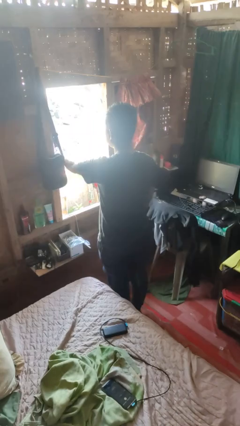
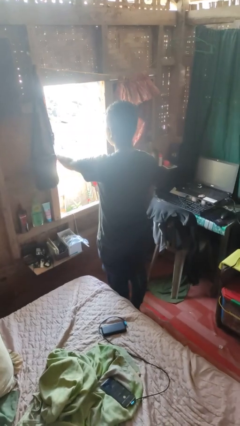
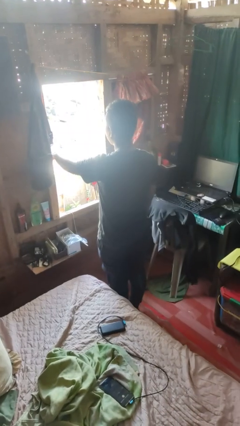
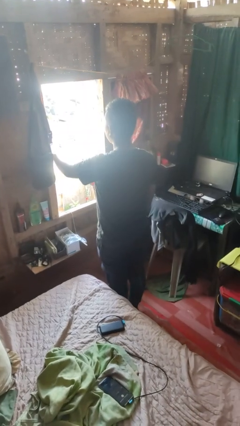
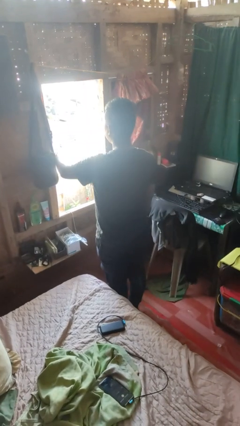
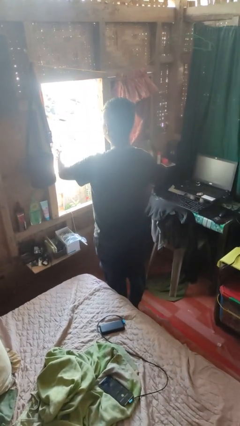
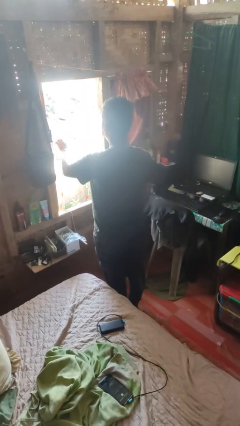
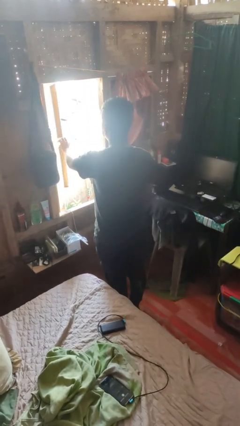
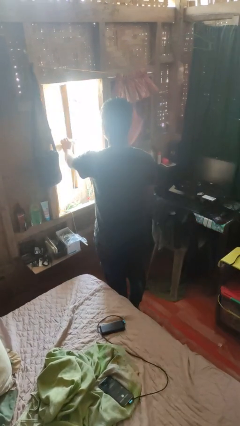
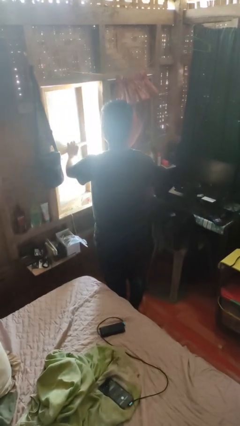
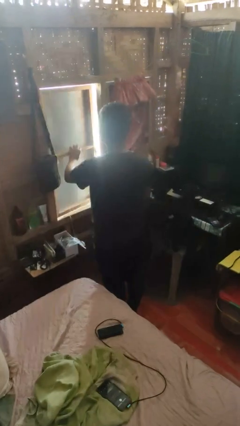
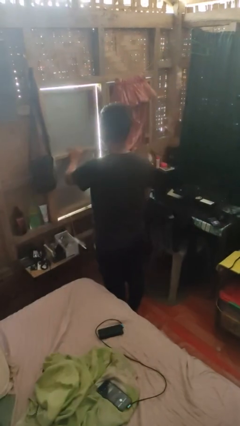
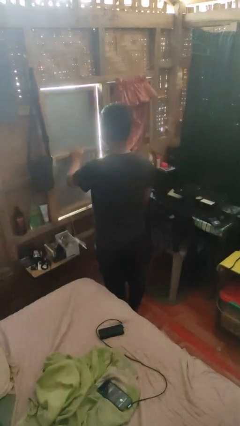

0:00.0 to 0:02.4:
person closes home window

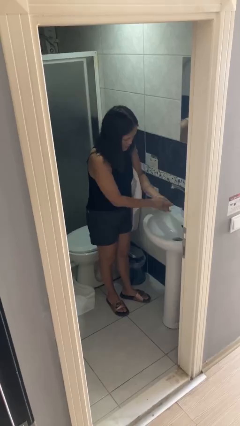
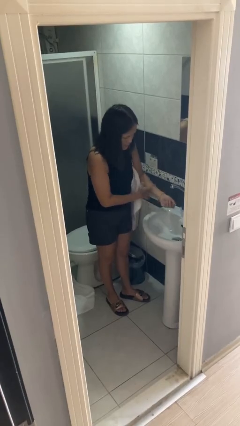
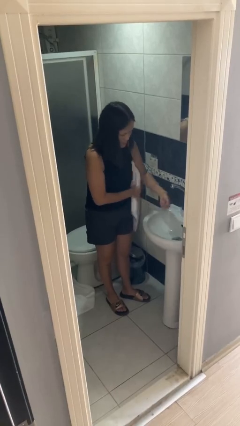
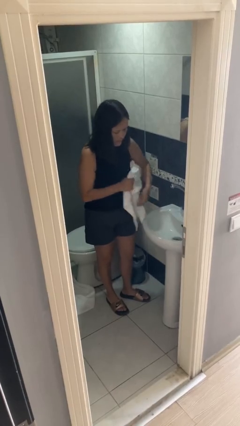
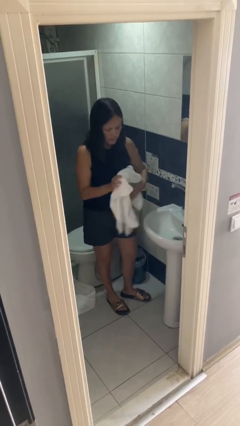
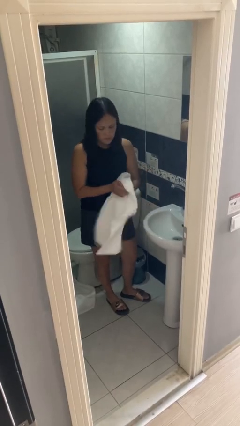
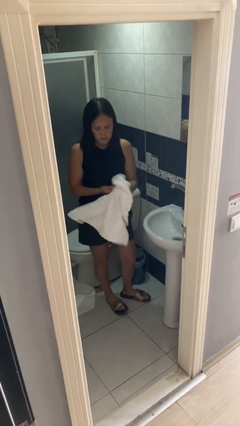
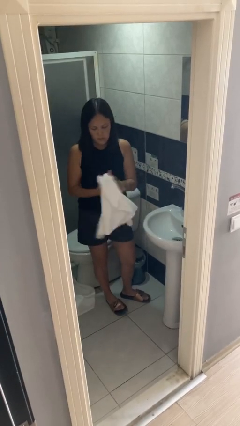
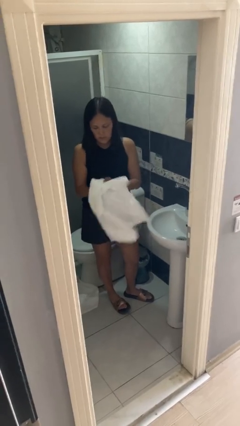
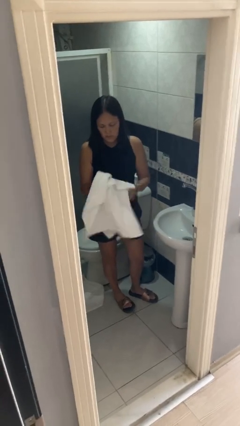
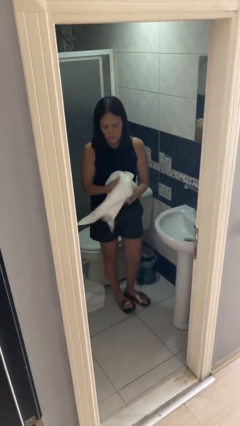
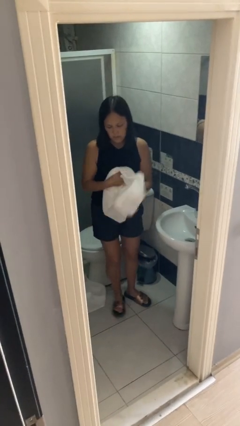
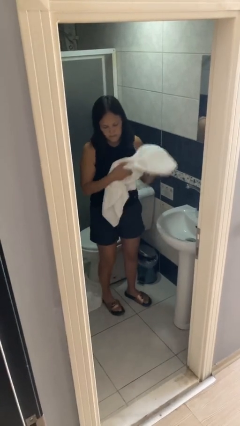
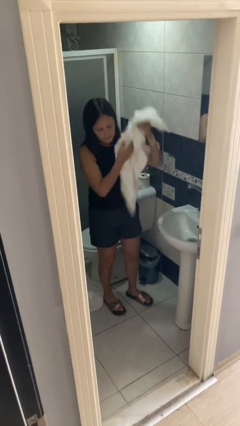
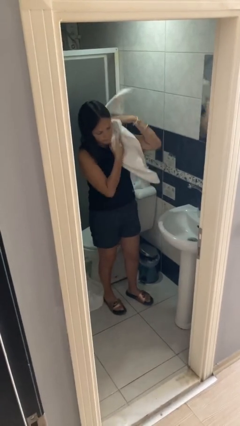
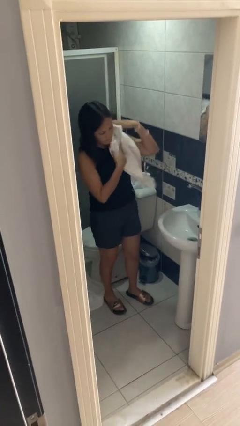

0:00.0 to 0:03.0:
person dries hands with towel

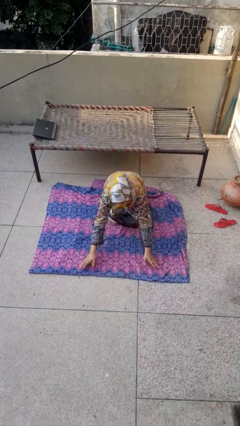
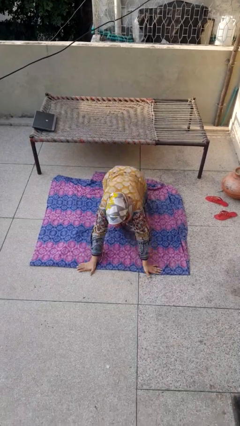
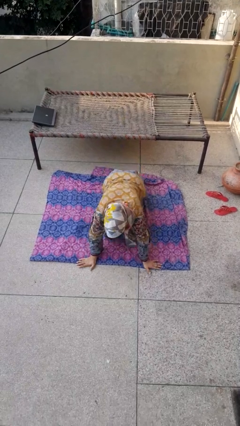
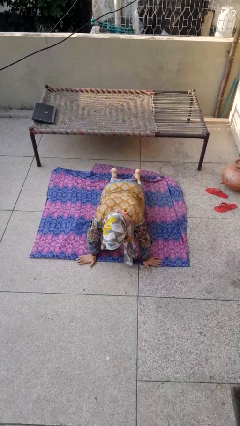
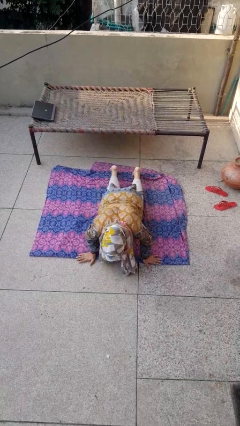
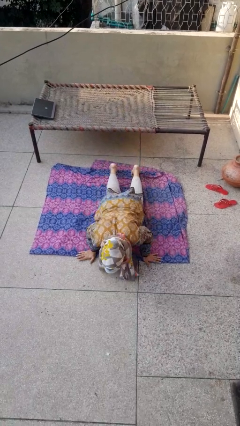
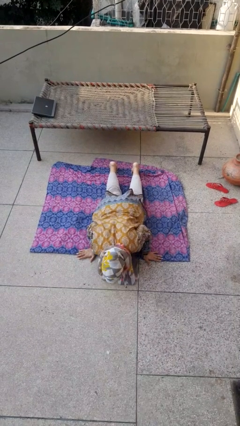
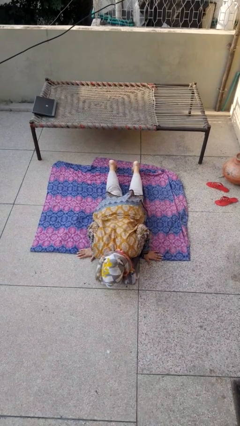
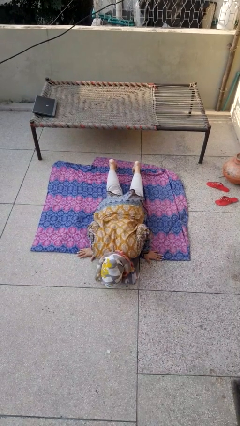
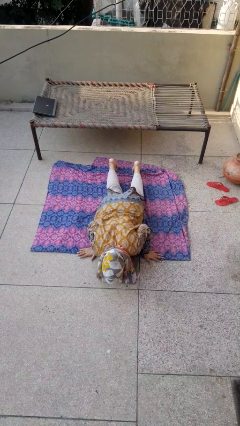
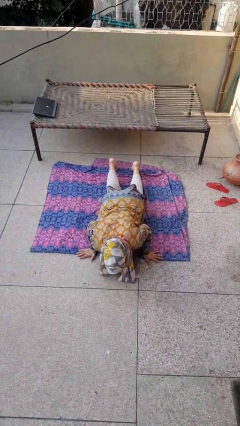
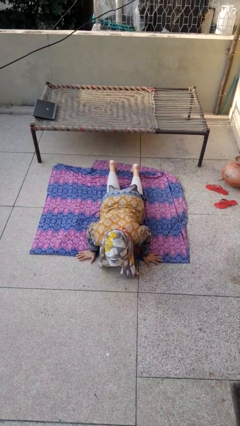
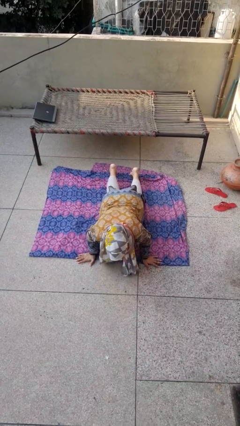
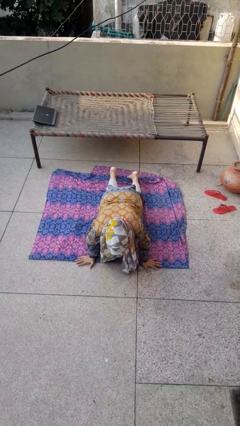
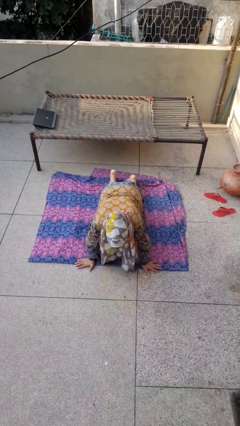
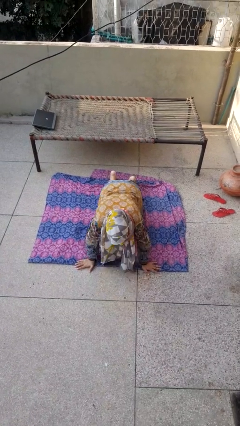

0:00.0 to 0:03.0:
person exercises with pushup

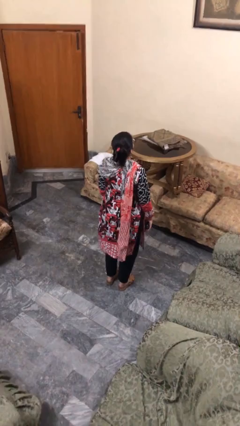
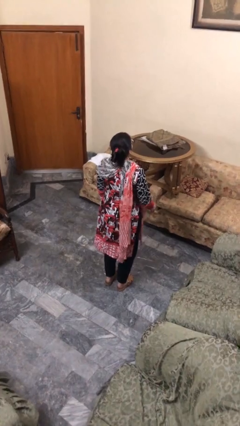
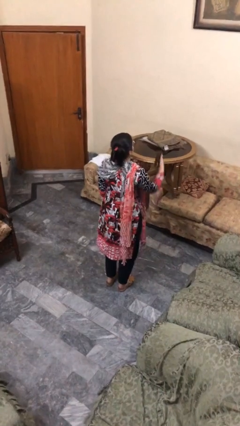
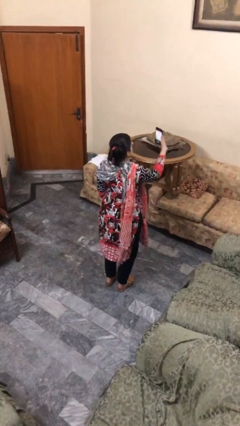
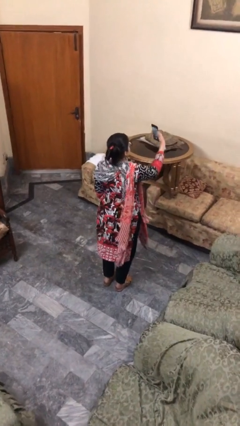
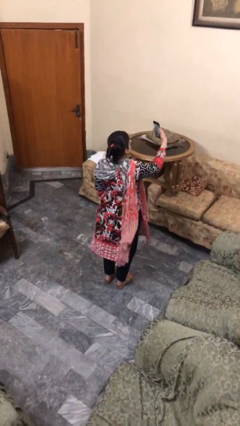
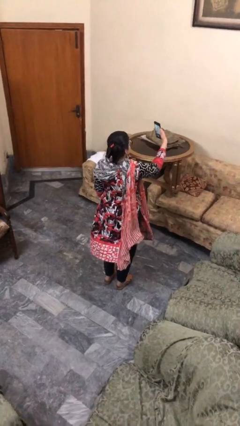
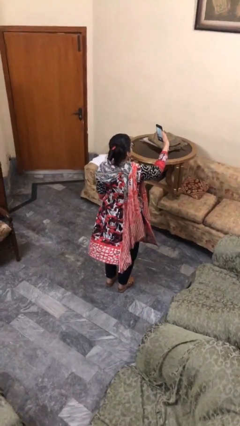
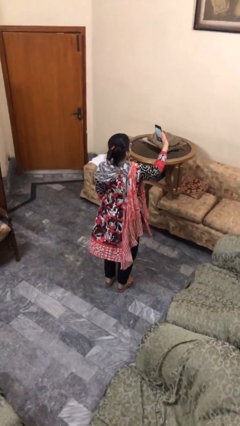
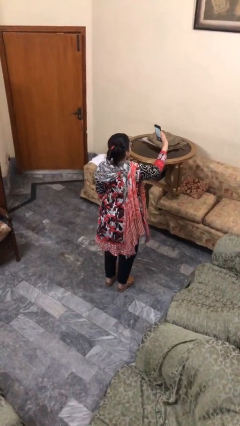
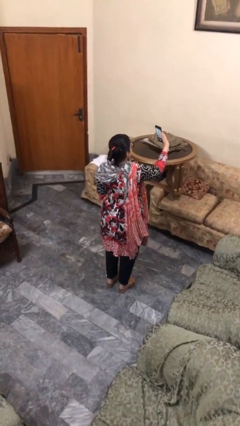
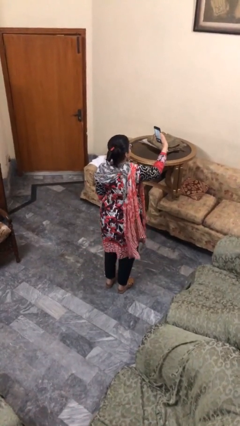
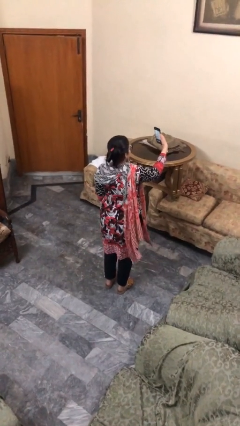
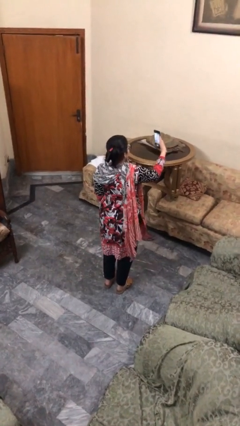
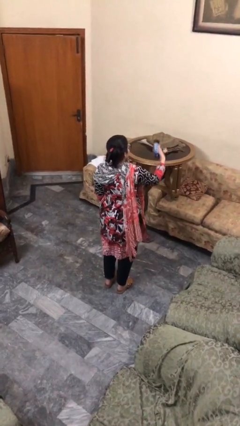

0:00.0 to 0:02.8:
person takes selfie

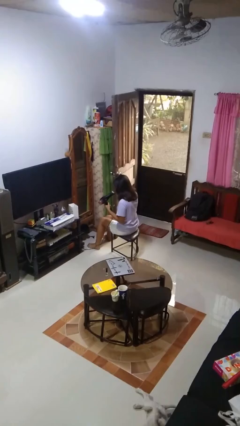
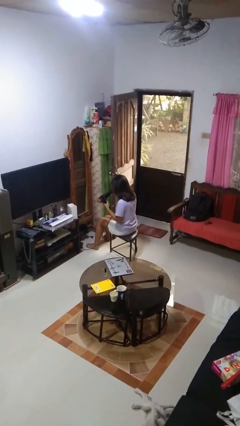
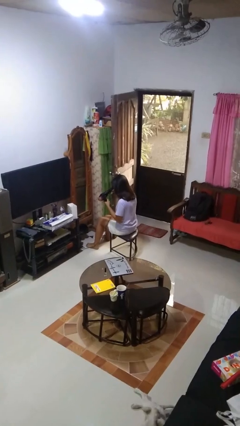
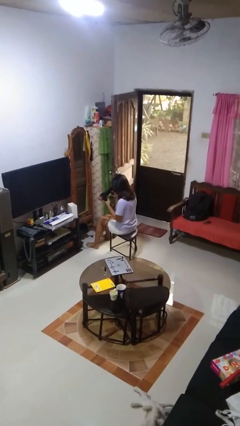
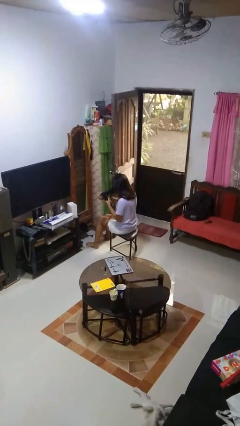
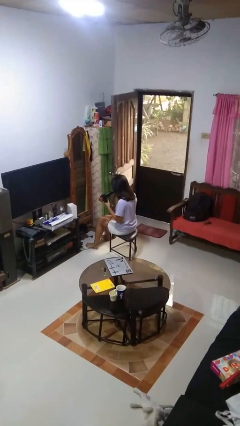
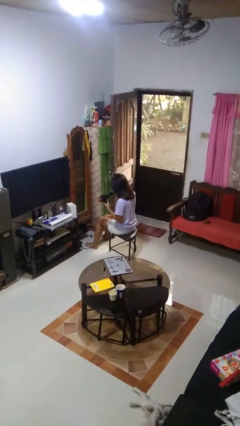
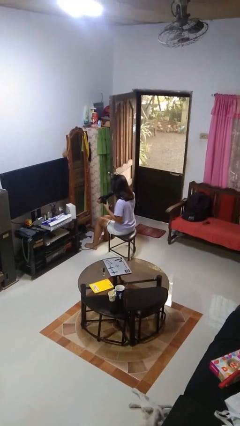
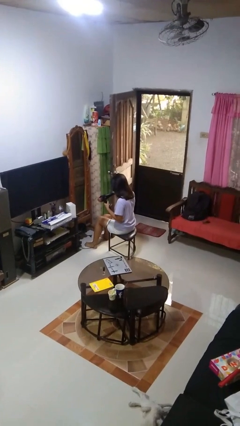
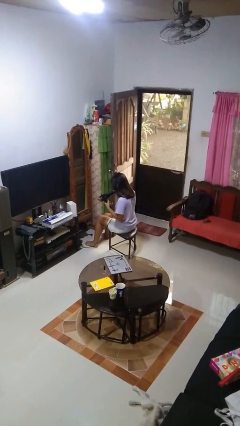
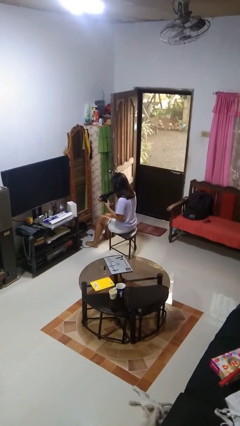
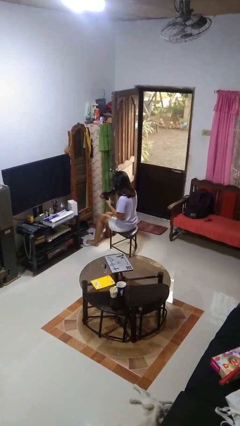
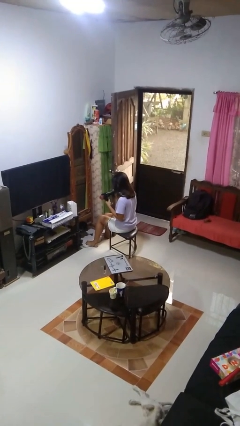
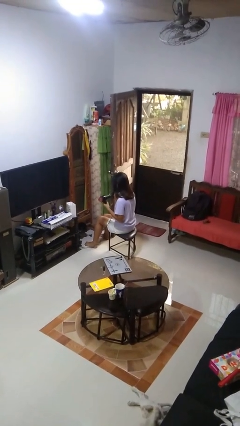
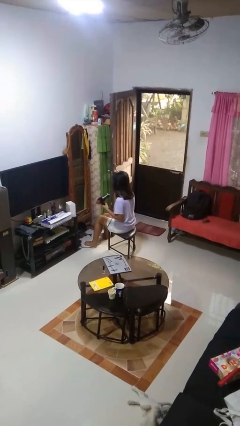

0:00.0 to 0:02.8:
person dries hair with hairdryer

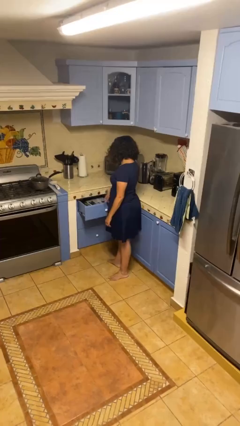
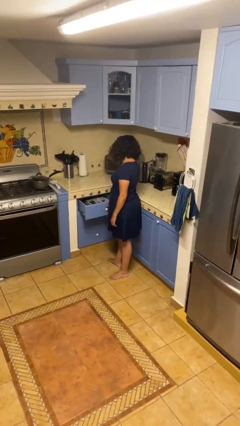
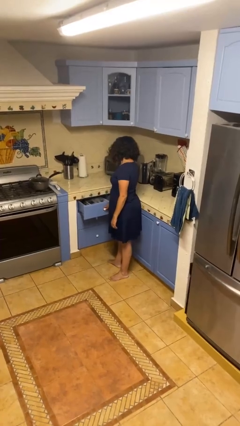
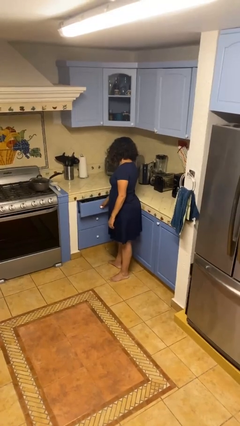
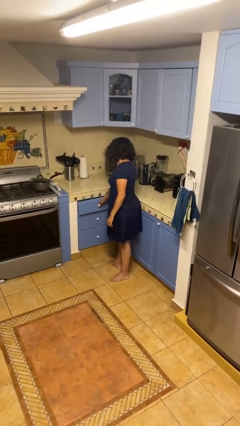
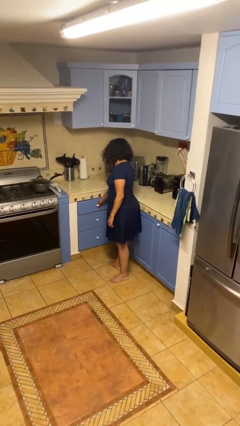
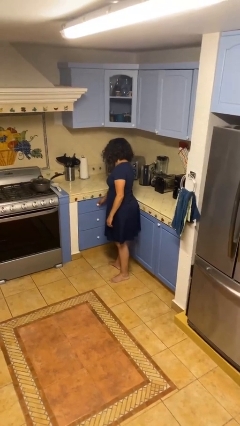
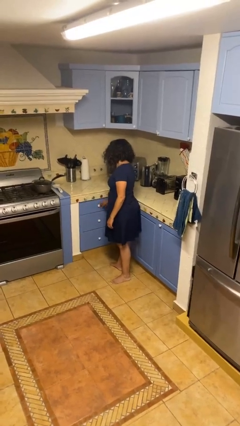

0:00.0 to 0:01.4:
person closes kitchen drawer

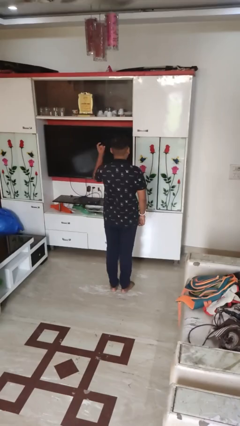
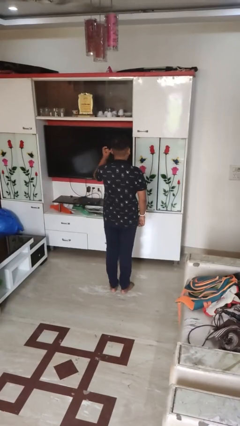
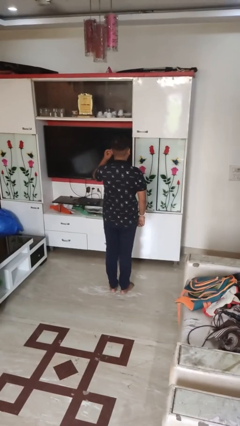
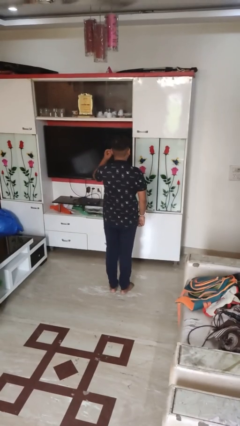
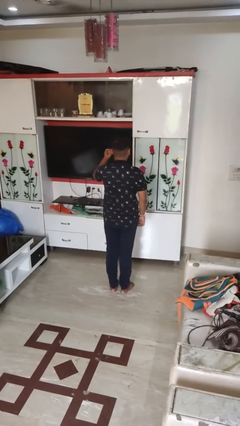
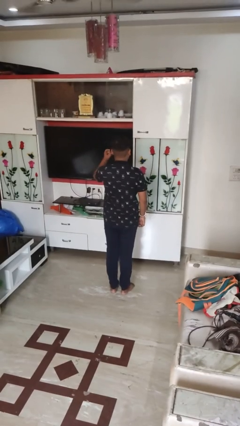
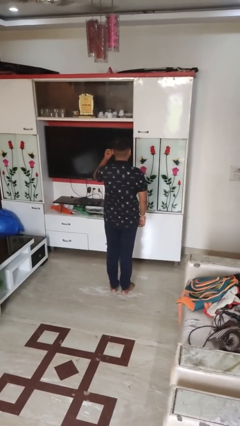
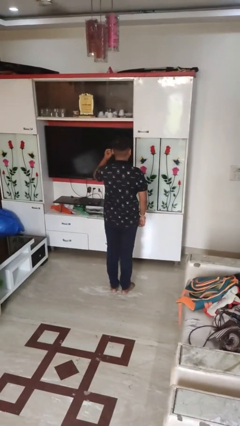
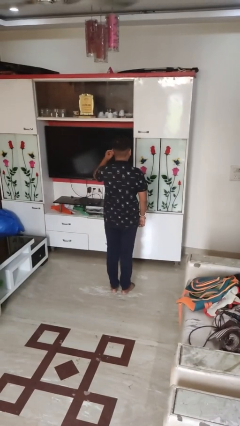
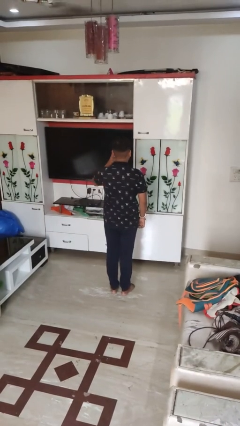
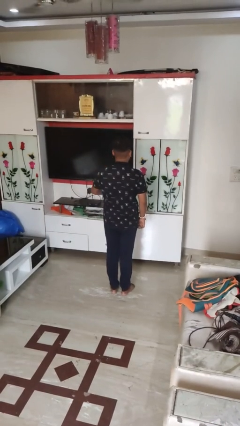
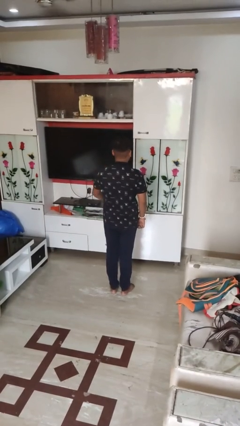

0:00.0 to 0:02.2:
person gestures listen closely
